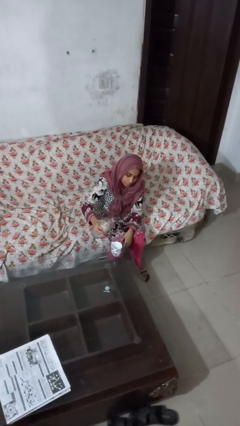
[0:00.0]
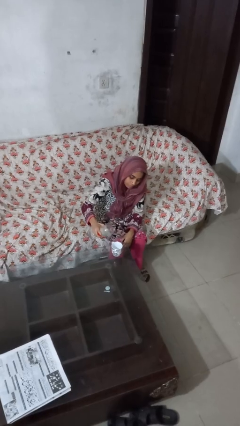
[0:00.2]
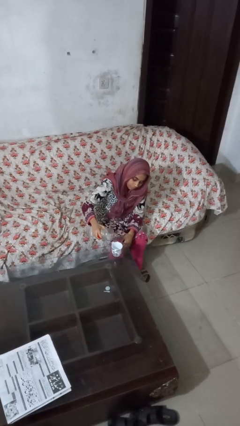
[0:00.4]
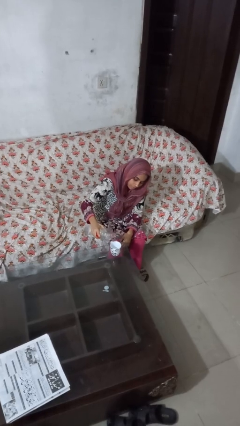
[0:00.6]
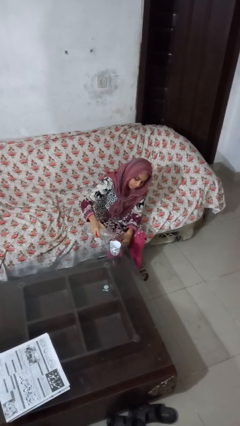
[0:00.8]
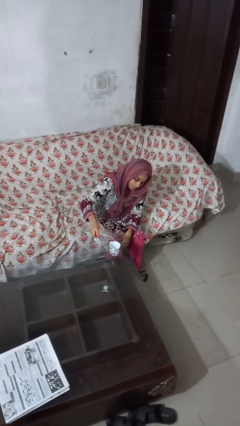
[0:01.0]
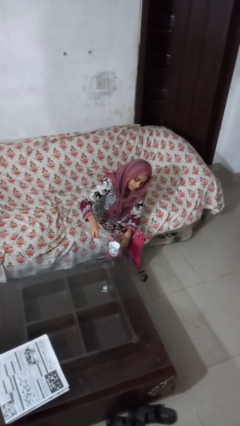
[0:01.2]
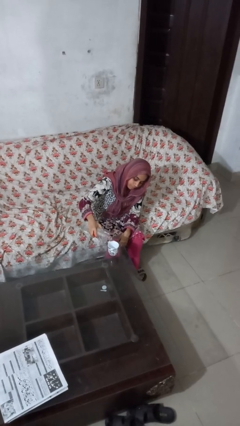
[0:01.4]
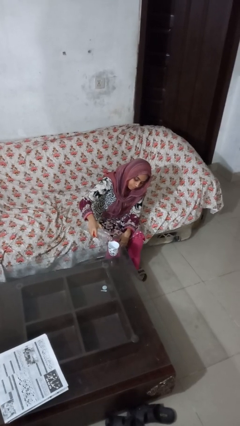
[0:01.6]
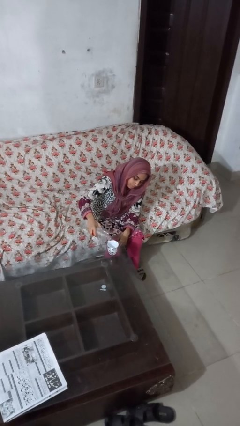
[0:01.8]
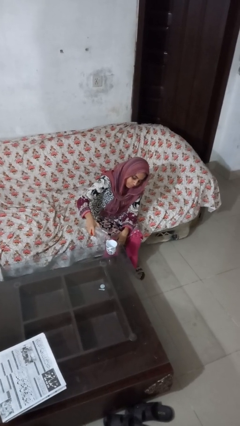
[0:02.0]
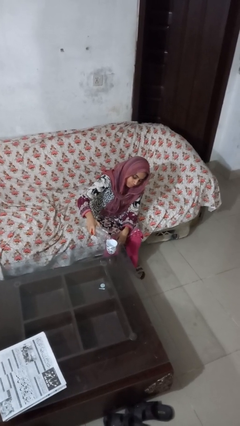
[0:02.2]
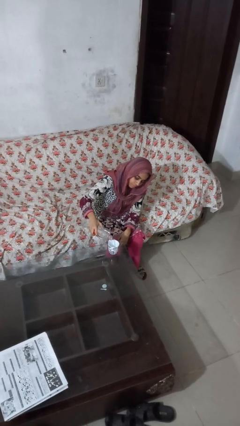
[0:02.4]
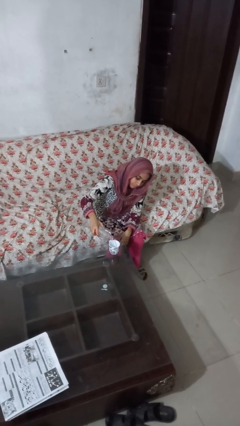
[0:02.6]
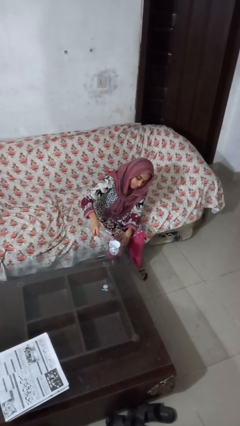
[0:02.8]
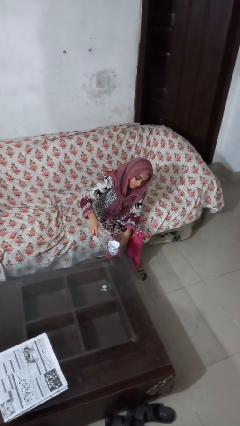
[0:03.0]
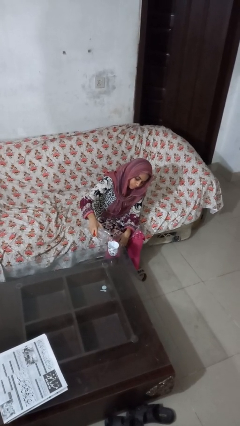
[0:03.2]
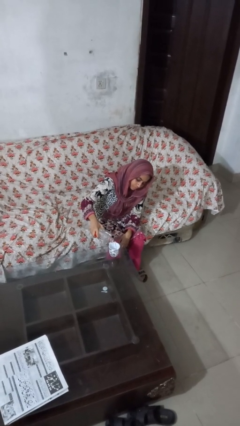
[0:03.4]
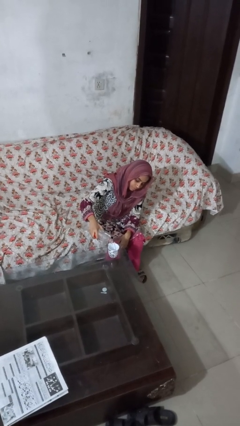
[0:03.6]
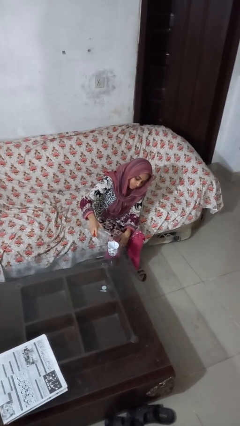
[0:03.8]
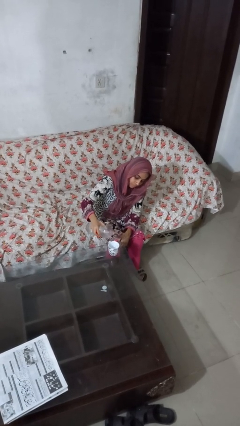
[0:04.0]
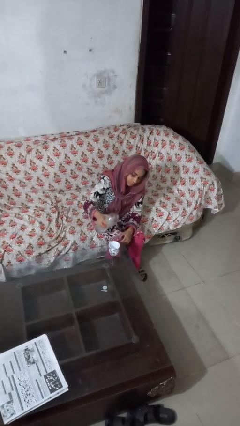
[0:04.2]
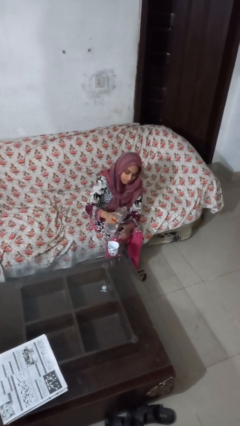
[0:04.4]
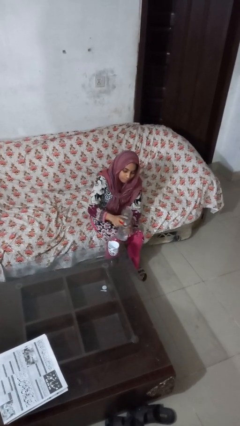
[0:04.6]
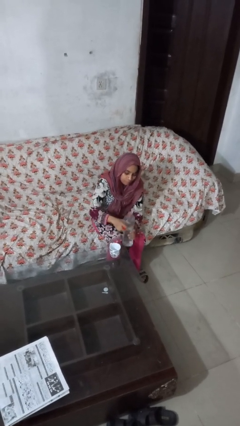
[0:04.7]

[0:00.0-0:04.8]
person pours liquid into cup

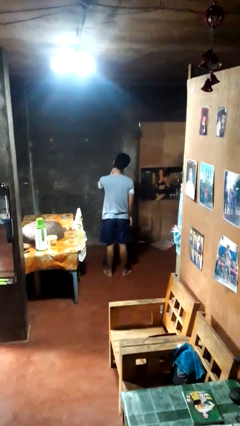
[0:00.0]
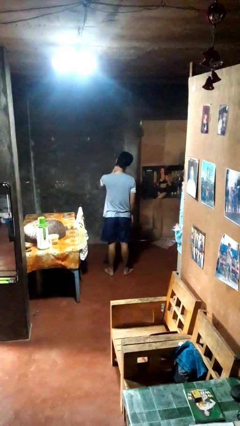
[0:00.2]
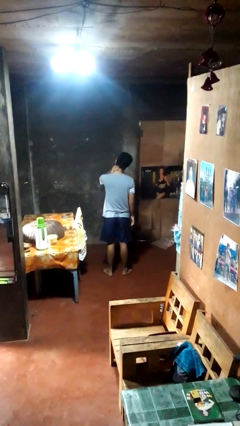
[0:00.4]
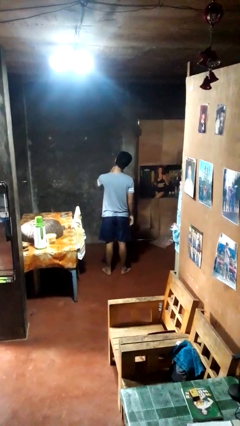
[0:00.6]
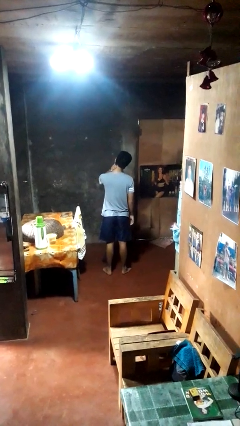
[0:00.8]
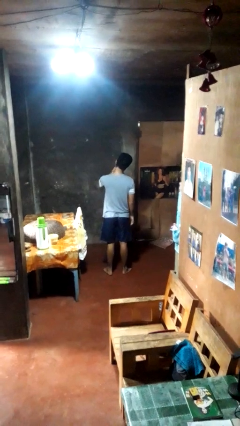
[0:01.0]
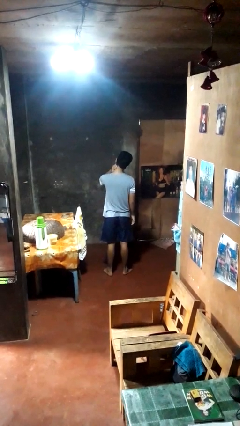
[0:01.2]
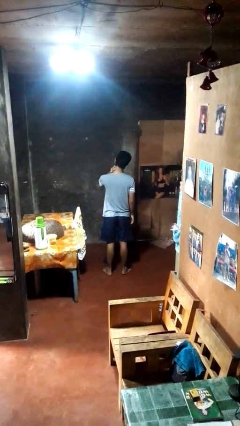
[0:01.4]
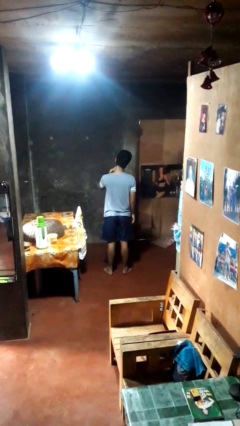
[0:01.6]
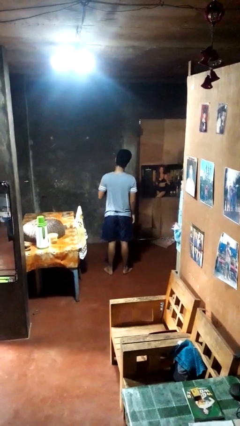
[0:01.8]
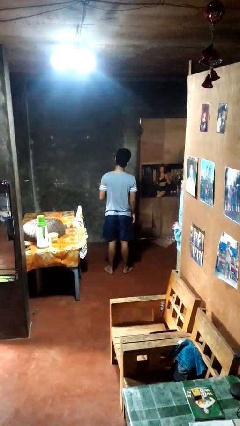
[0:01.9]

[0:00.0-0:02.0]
person swats bug

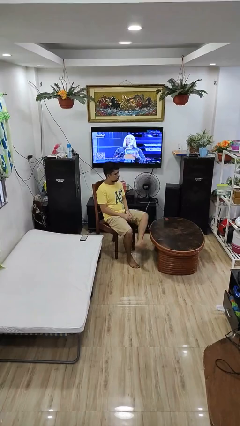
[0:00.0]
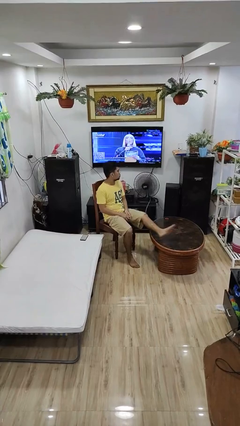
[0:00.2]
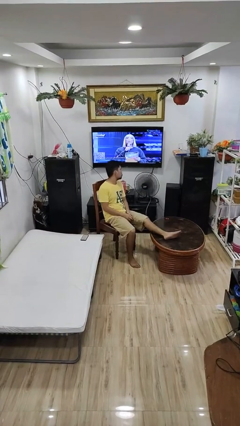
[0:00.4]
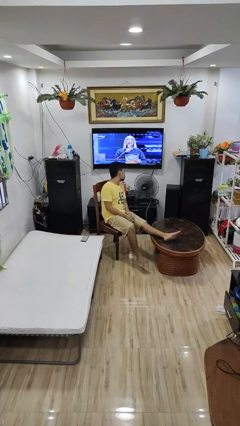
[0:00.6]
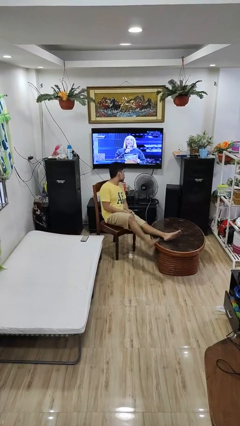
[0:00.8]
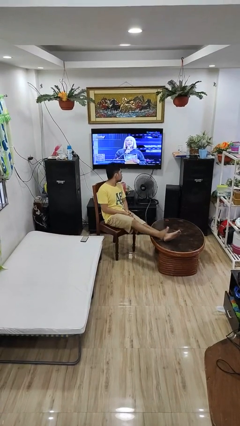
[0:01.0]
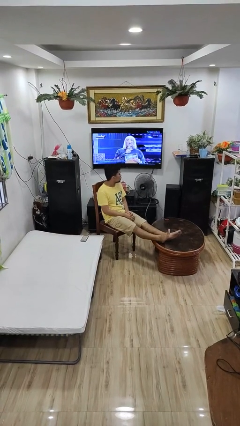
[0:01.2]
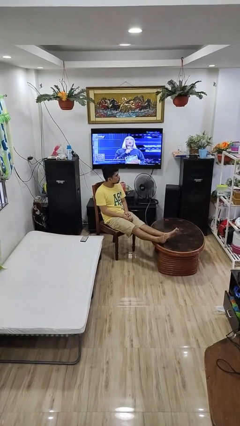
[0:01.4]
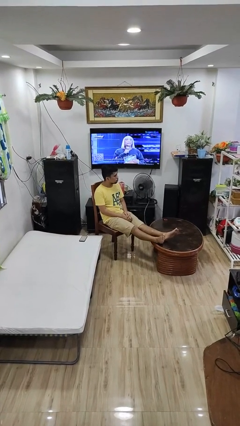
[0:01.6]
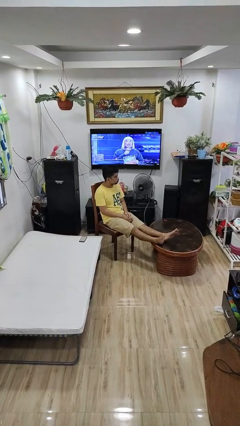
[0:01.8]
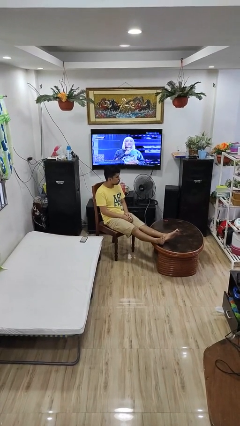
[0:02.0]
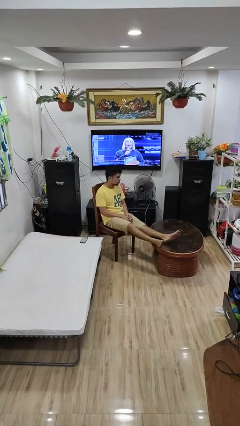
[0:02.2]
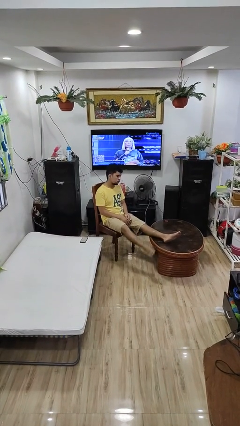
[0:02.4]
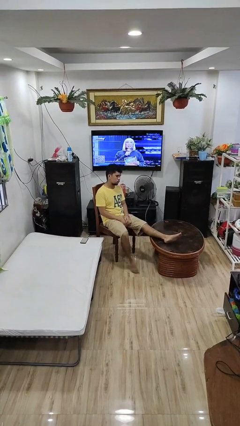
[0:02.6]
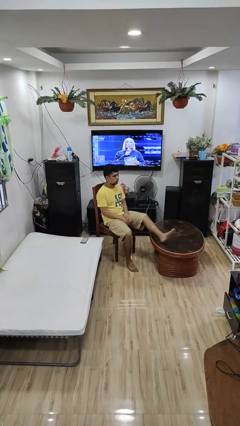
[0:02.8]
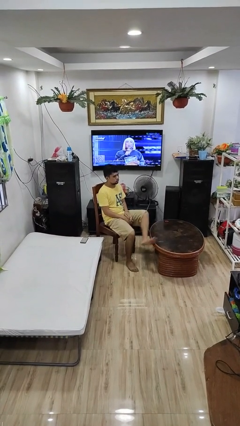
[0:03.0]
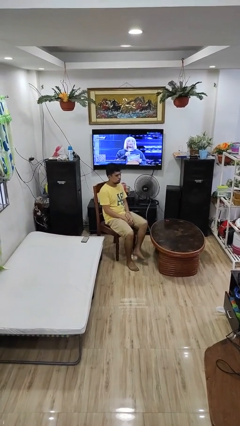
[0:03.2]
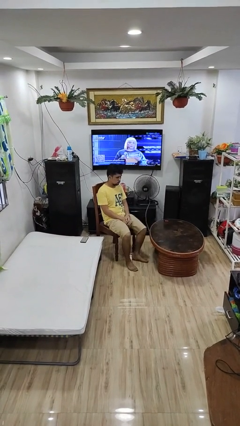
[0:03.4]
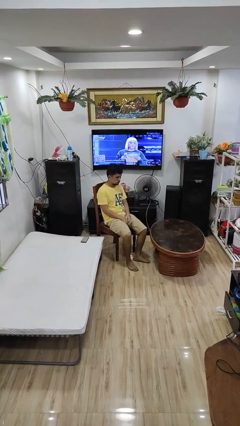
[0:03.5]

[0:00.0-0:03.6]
person puts feet up

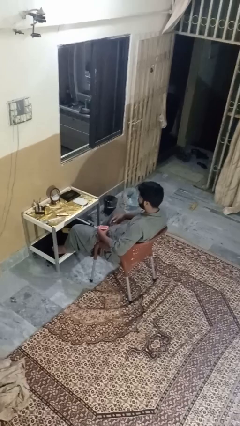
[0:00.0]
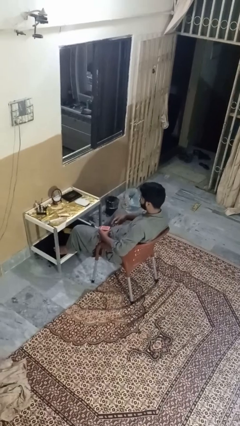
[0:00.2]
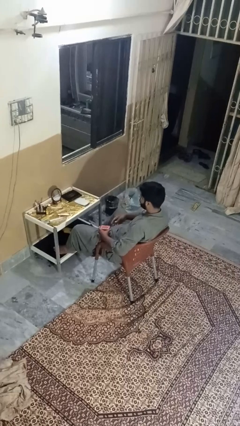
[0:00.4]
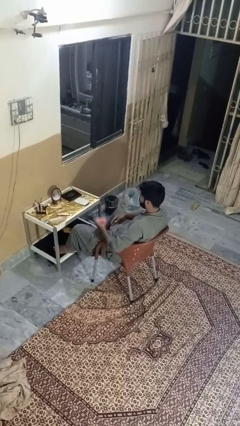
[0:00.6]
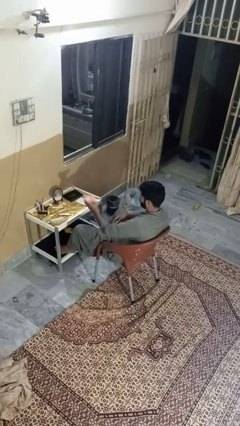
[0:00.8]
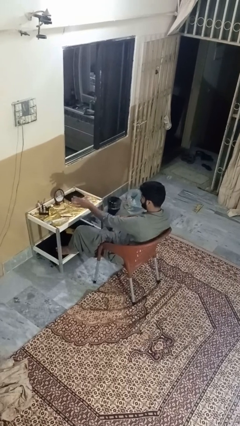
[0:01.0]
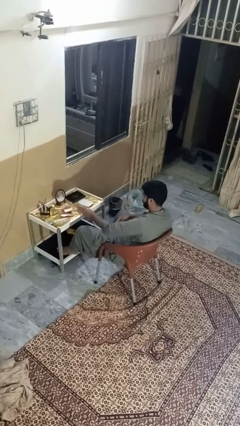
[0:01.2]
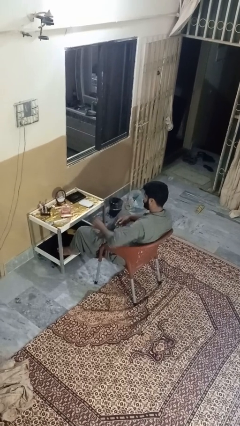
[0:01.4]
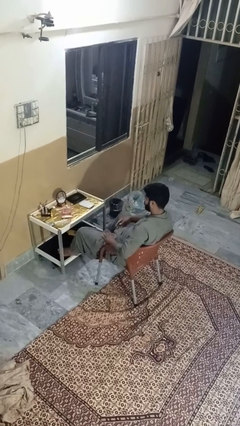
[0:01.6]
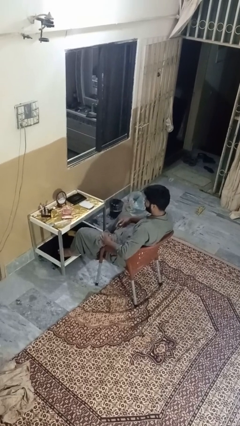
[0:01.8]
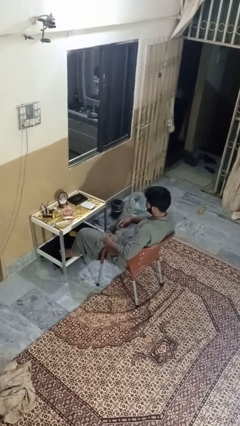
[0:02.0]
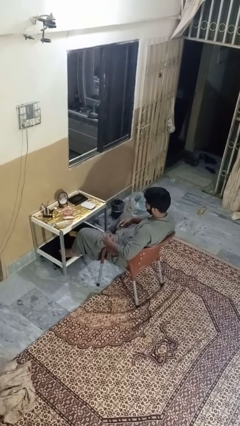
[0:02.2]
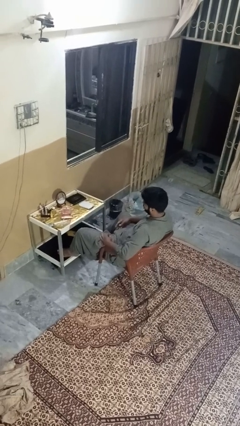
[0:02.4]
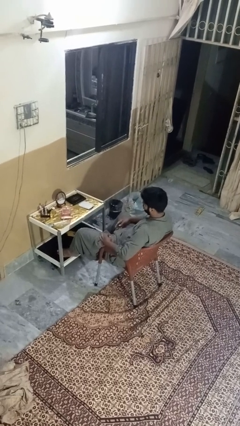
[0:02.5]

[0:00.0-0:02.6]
person throws object on table

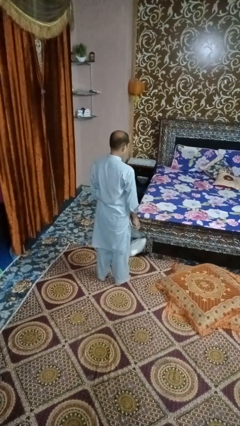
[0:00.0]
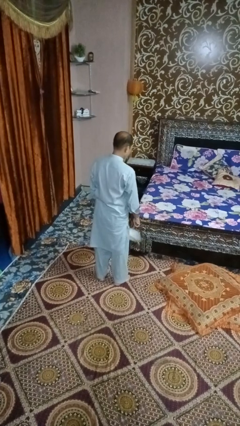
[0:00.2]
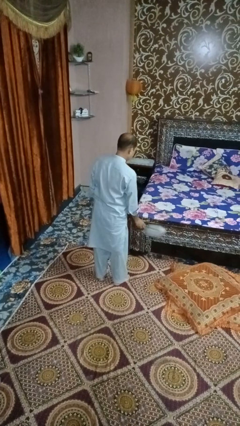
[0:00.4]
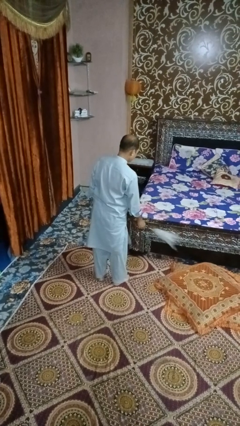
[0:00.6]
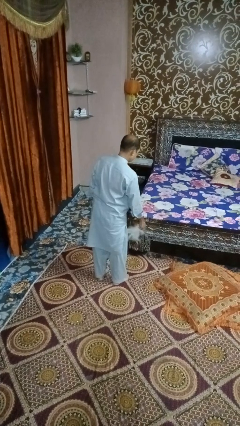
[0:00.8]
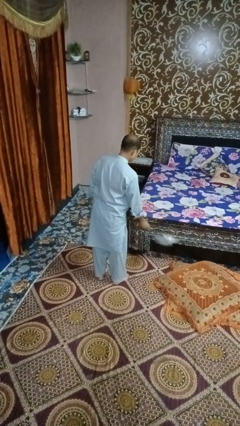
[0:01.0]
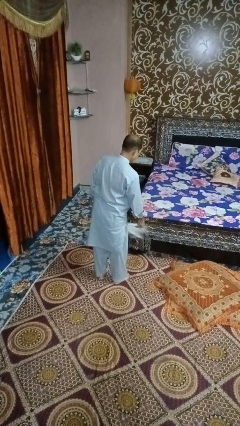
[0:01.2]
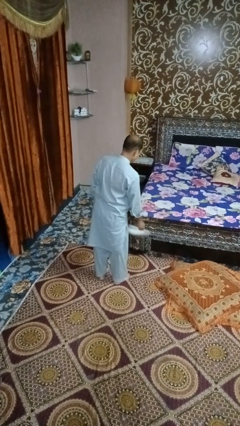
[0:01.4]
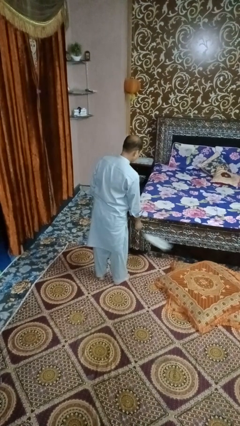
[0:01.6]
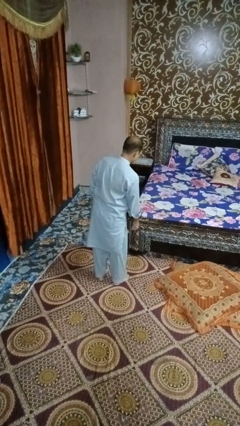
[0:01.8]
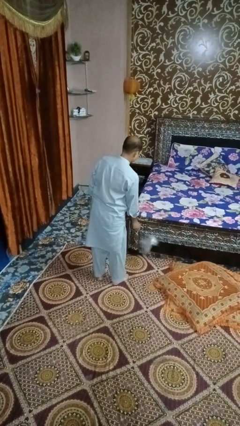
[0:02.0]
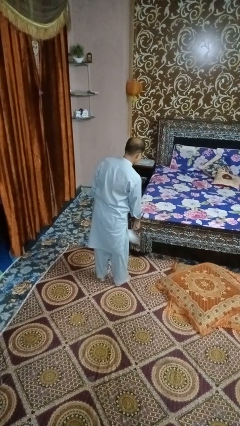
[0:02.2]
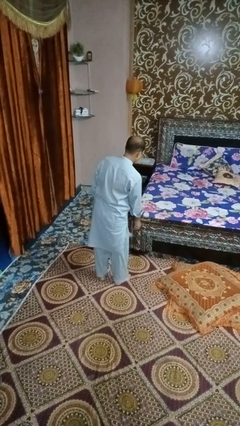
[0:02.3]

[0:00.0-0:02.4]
person dusts furniture

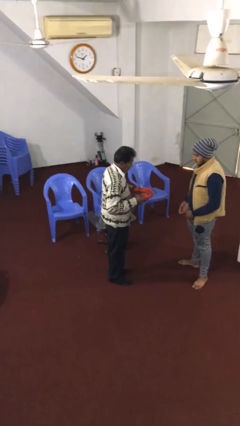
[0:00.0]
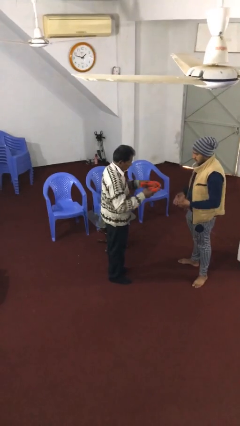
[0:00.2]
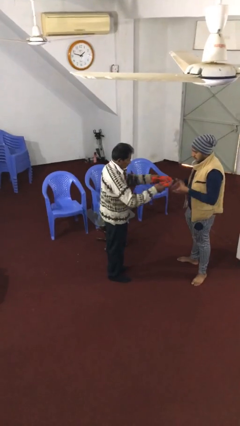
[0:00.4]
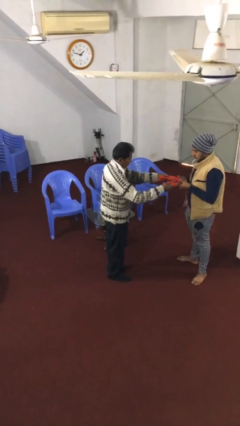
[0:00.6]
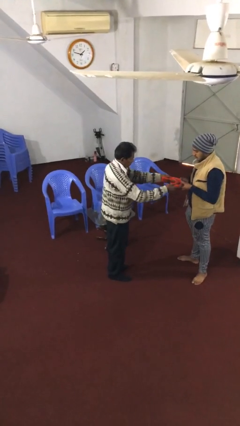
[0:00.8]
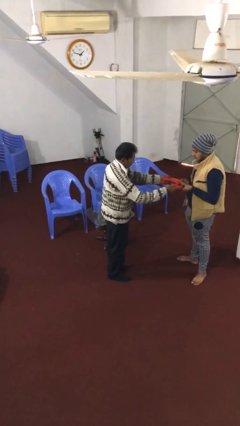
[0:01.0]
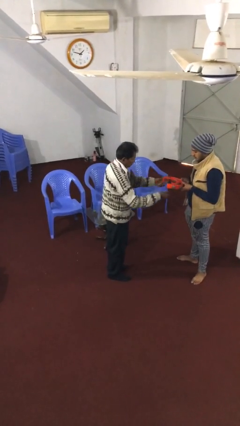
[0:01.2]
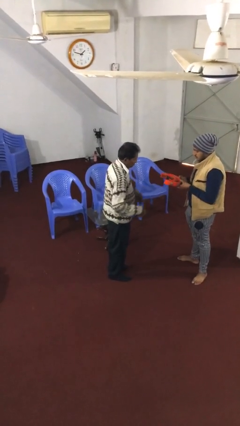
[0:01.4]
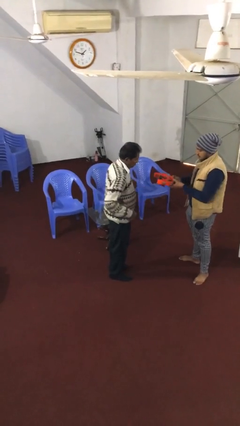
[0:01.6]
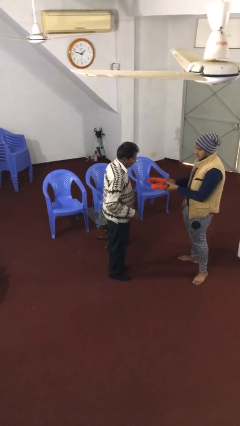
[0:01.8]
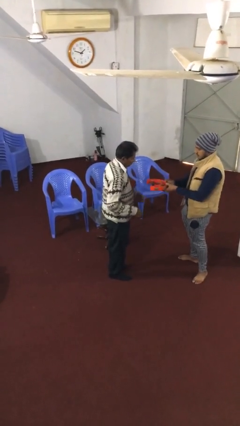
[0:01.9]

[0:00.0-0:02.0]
person transfers object to person
